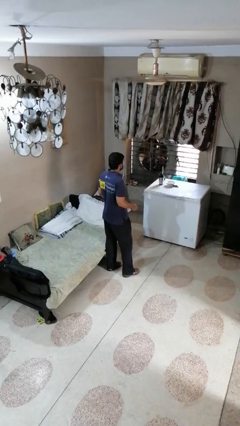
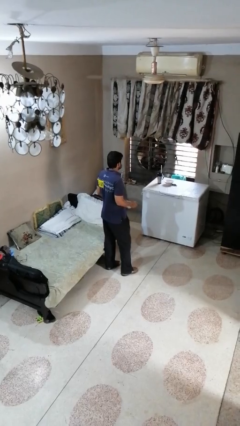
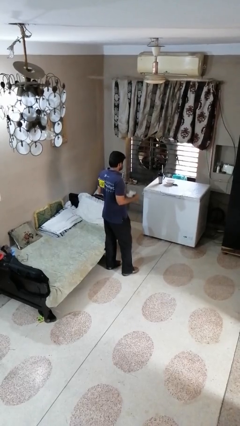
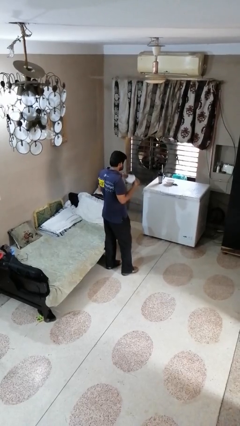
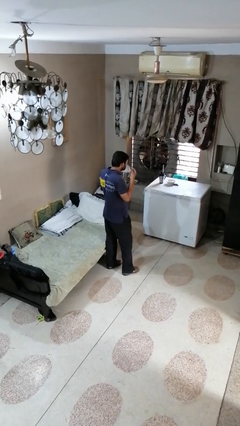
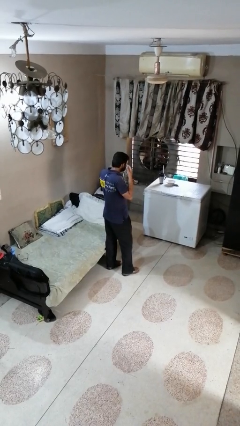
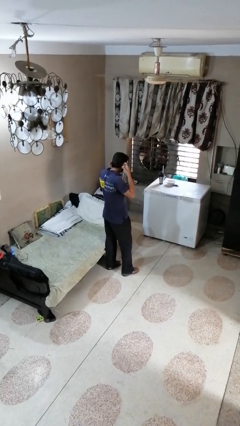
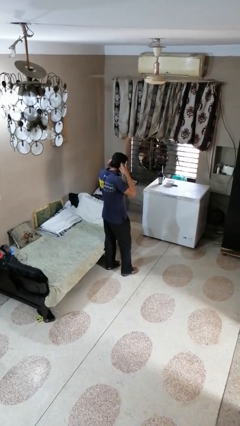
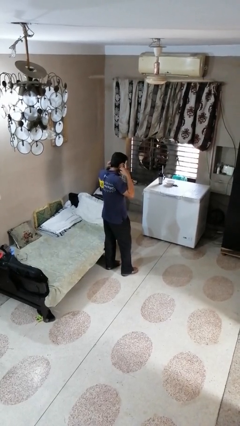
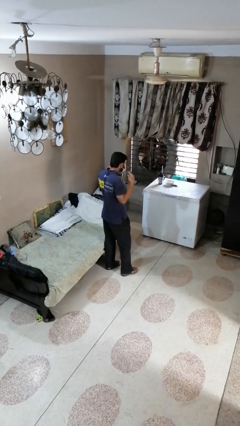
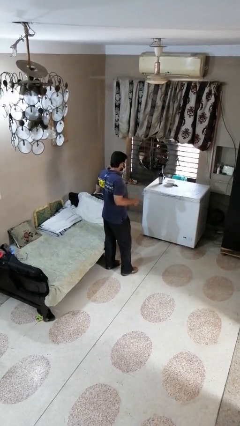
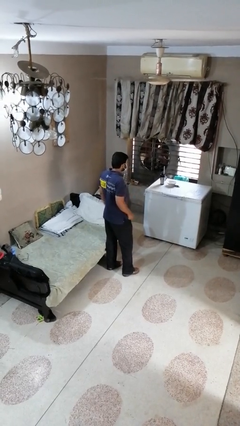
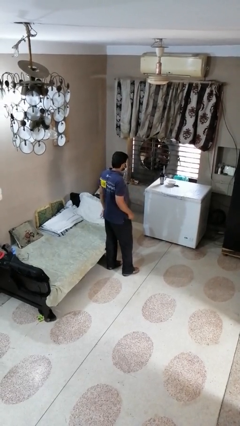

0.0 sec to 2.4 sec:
person puts on facemask

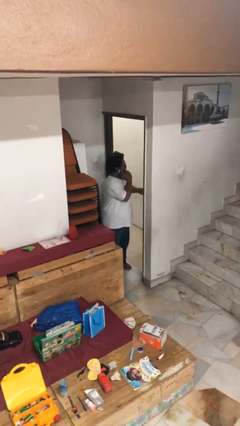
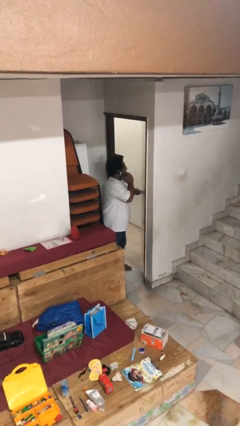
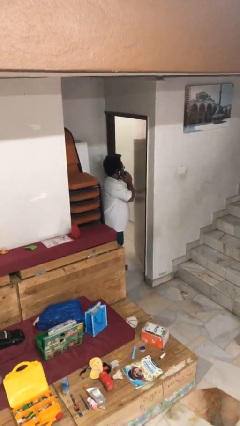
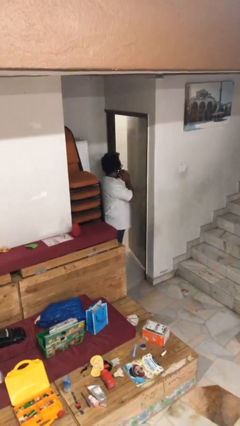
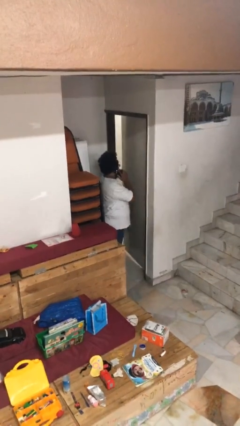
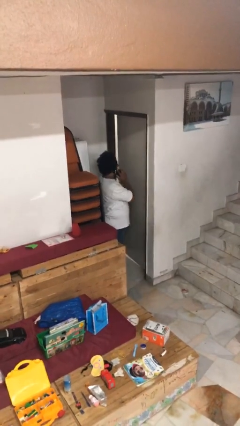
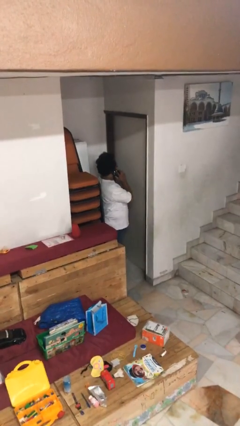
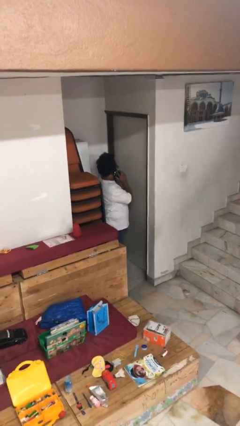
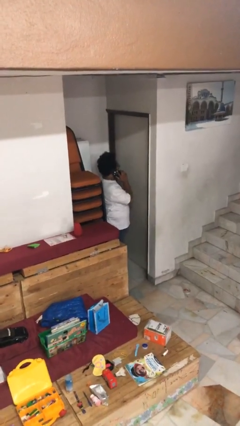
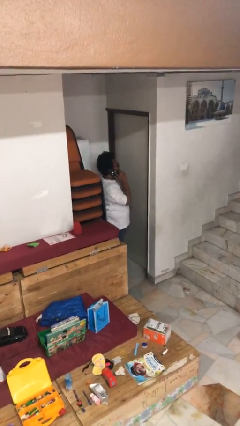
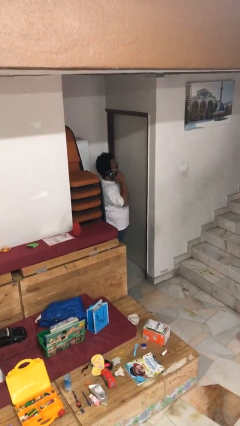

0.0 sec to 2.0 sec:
person closes facility door

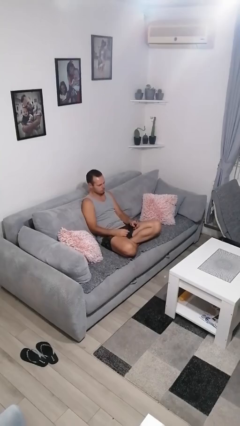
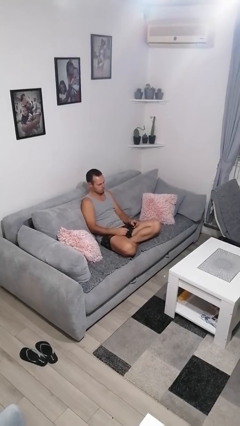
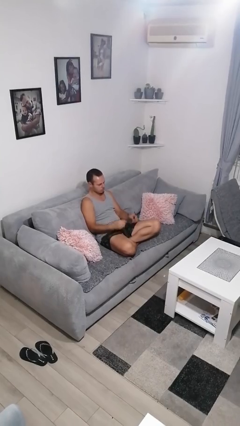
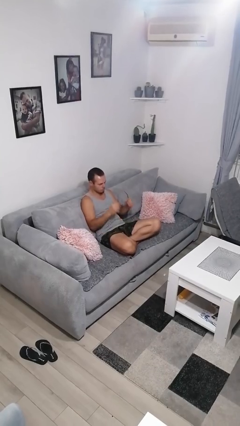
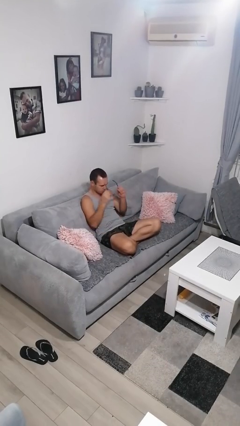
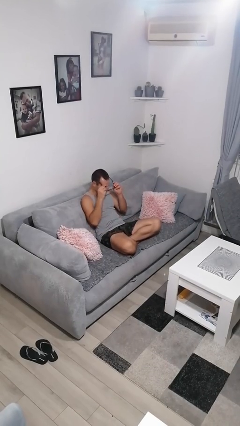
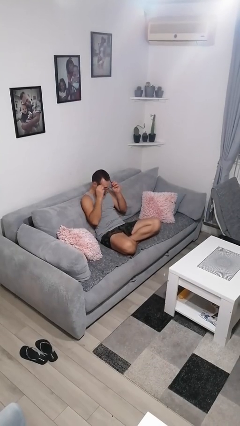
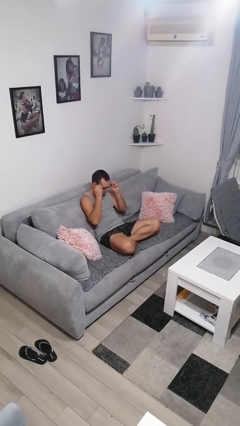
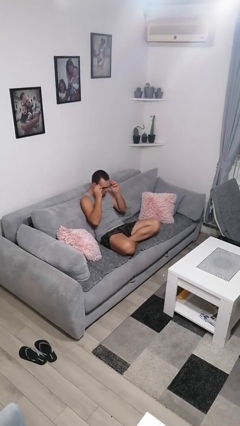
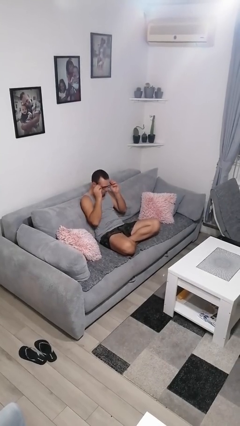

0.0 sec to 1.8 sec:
person puts on glasses

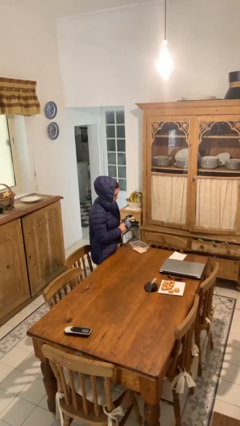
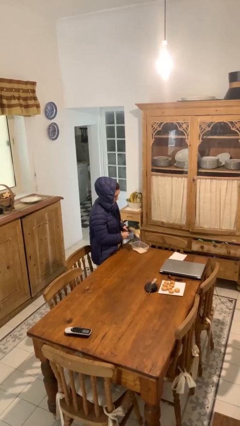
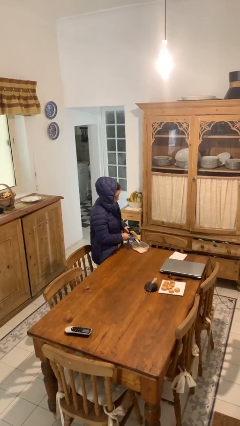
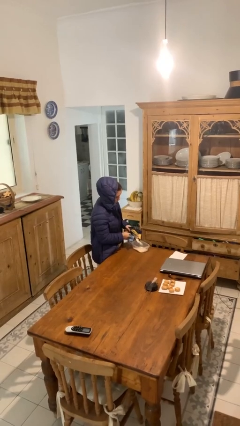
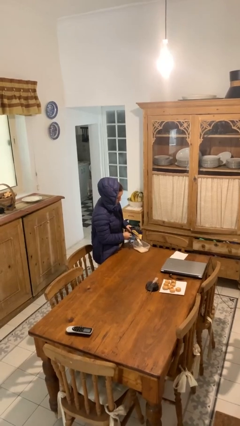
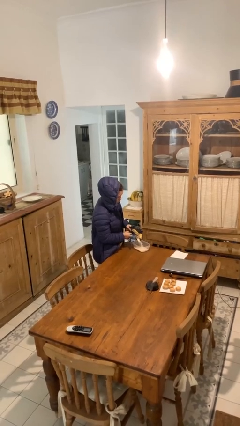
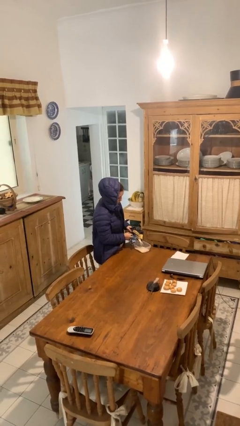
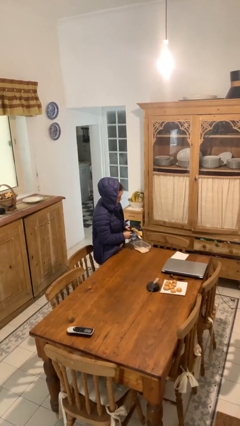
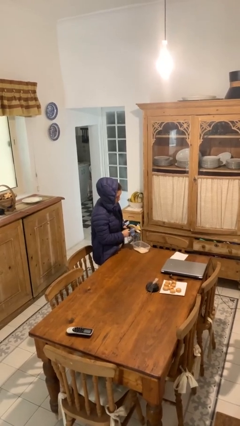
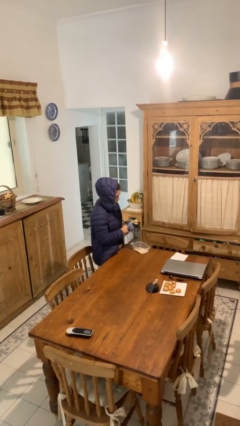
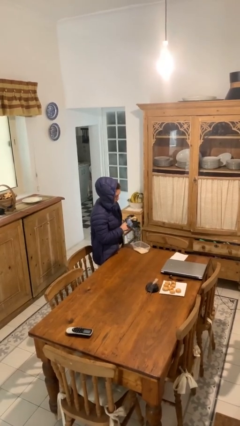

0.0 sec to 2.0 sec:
person pours into bowl

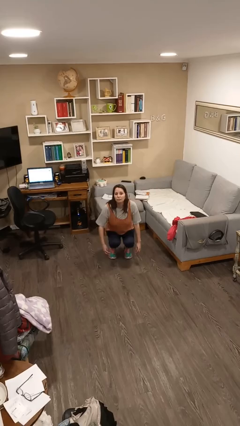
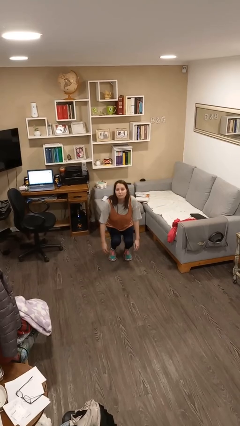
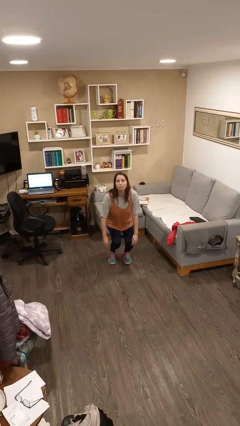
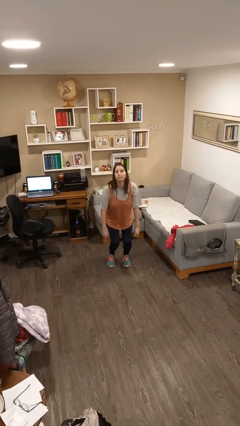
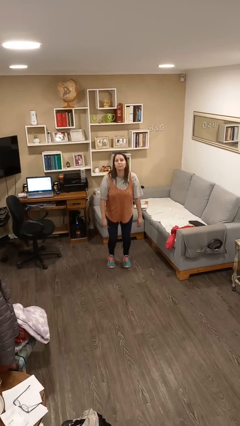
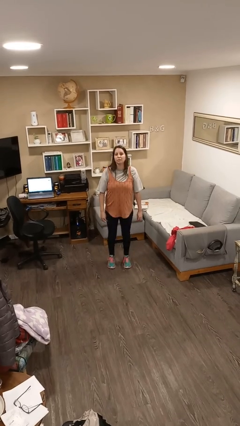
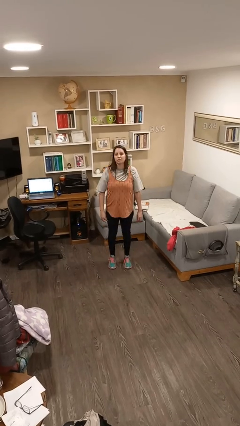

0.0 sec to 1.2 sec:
person stands up

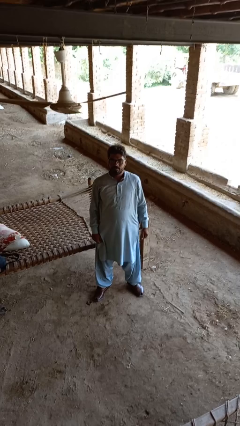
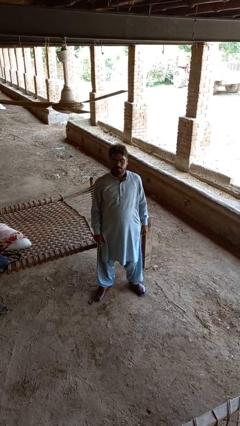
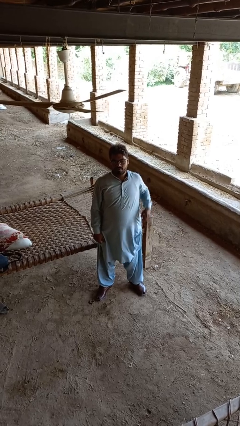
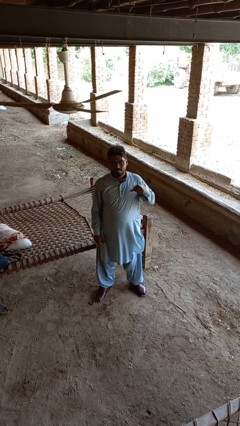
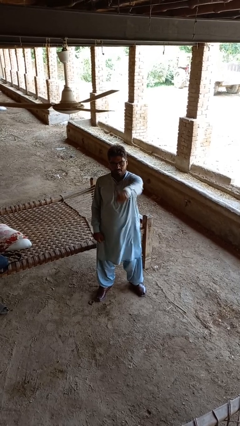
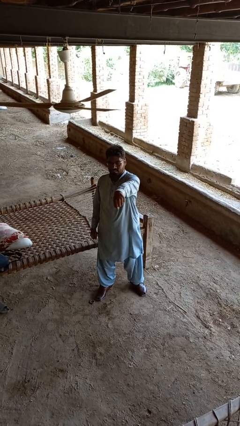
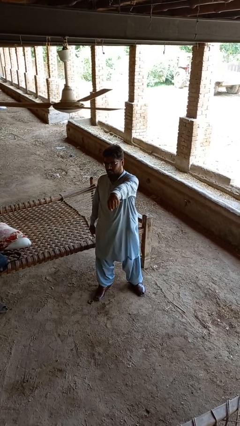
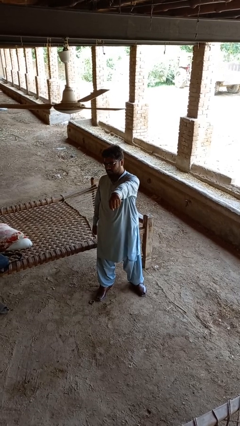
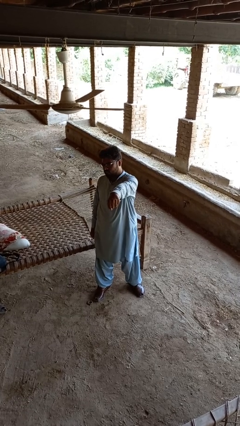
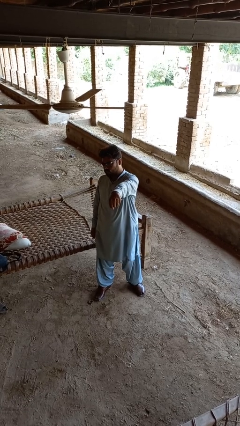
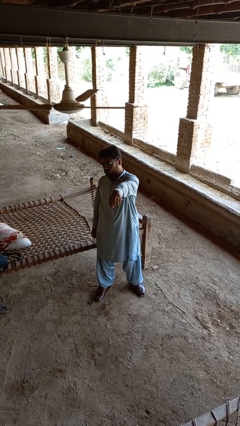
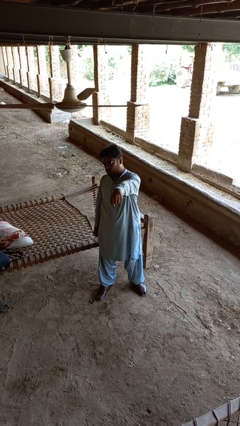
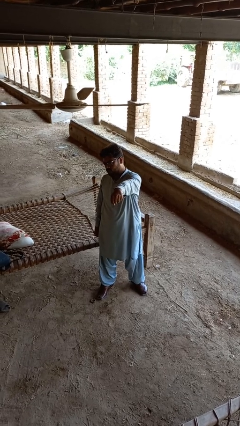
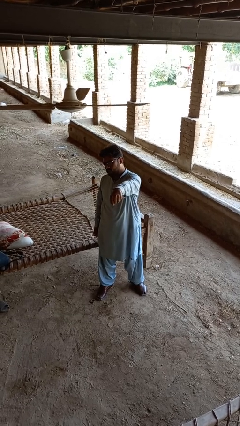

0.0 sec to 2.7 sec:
person punches

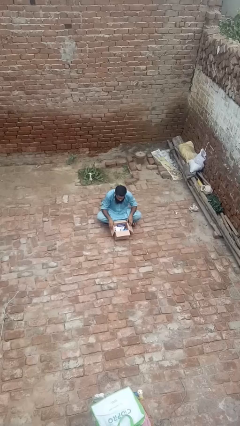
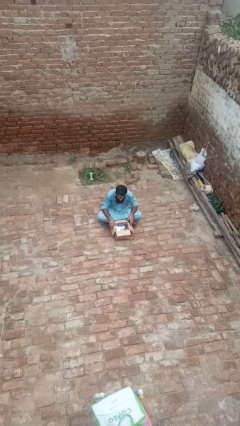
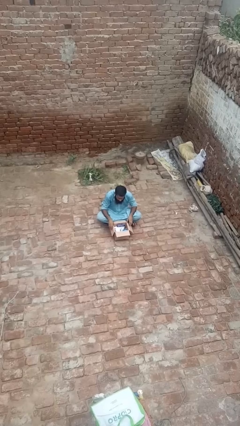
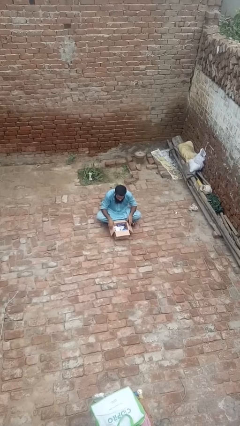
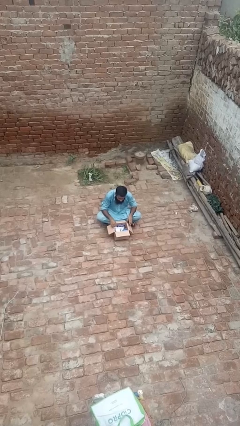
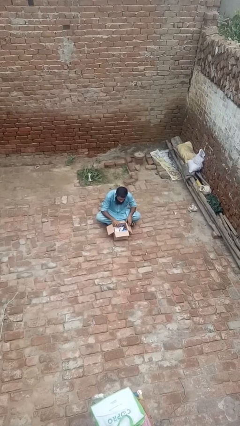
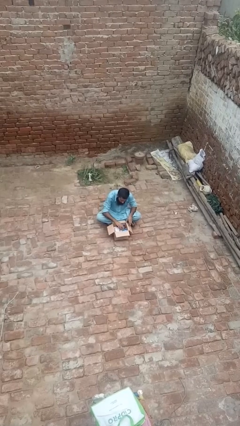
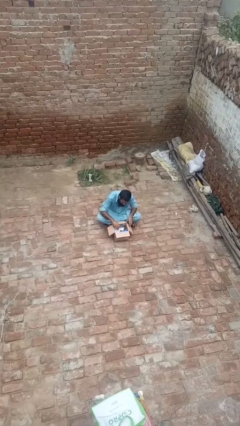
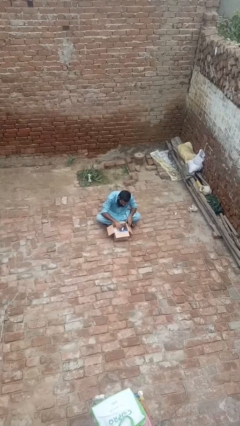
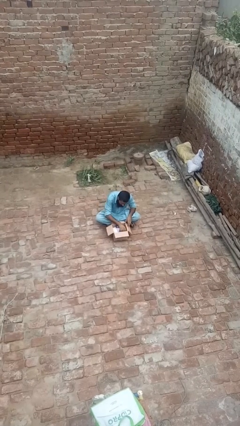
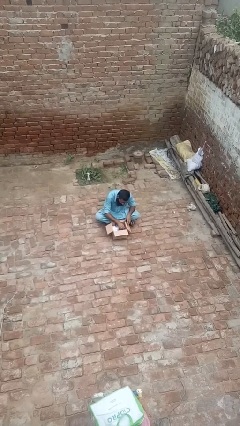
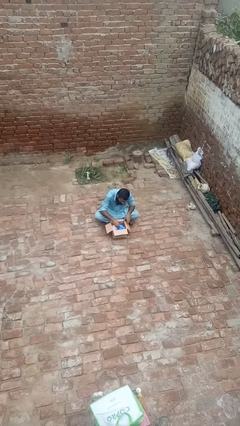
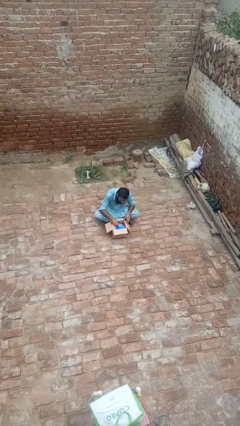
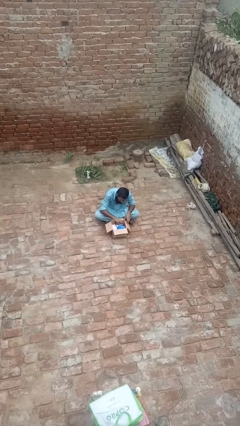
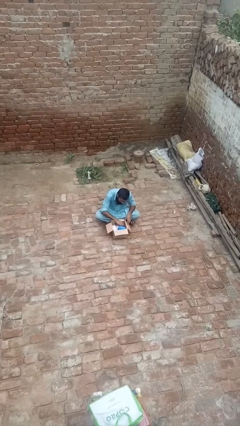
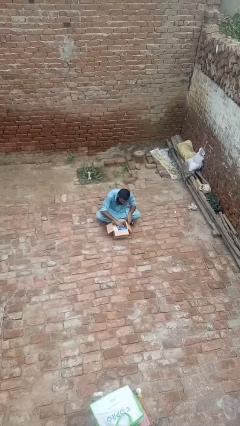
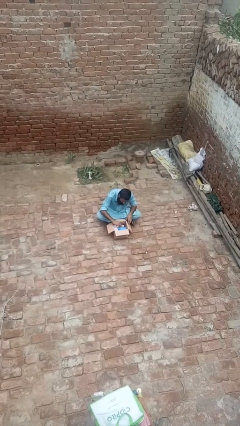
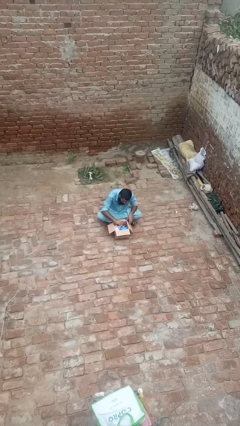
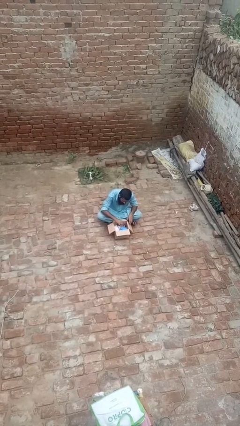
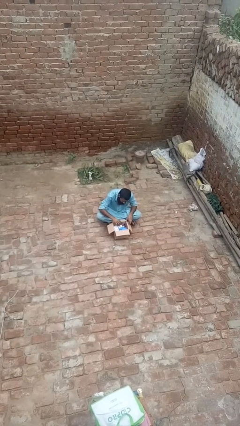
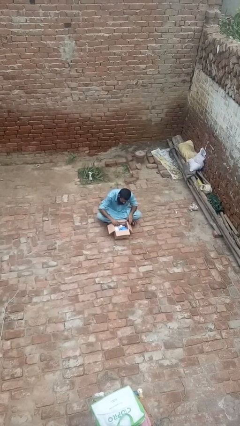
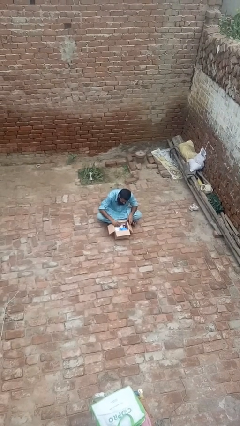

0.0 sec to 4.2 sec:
person searches in box

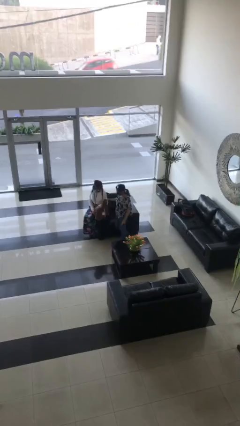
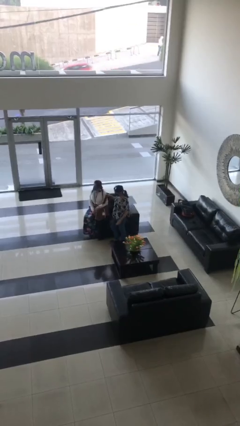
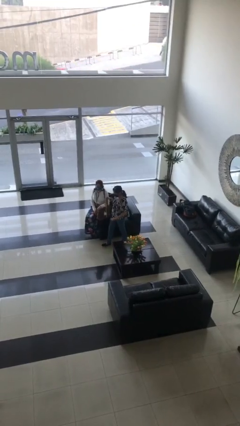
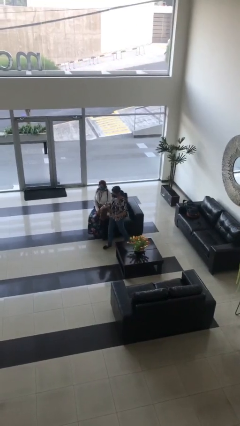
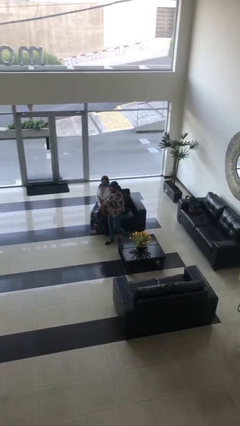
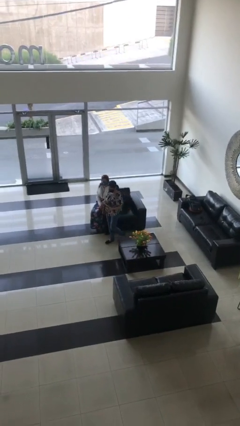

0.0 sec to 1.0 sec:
person steals object from person
